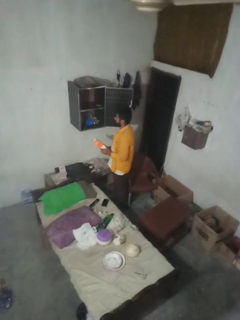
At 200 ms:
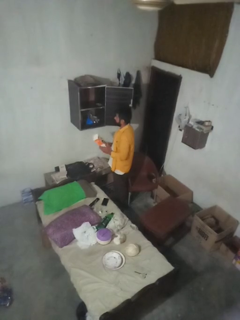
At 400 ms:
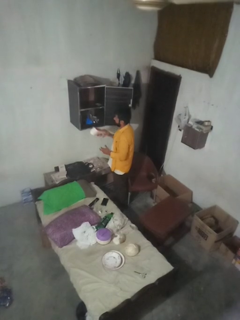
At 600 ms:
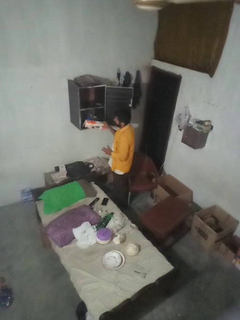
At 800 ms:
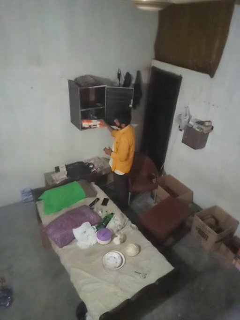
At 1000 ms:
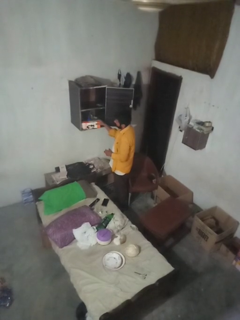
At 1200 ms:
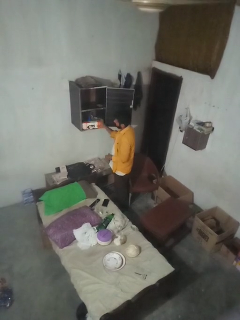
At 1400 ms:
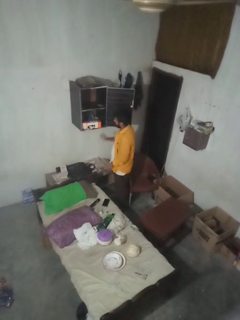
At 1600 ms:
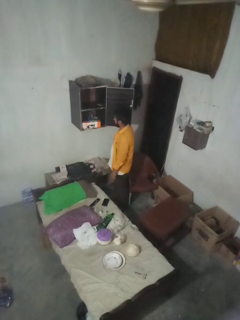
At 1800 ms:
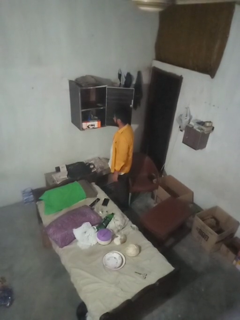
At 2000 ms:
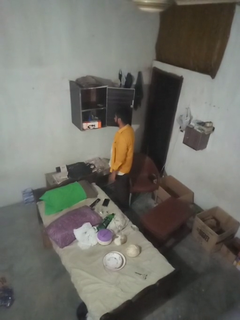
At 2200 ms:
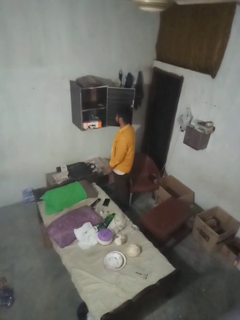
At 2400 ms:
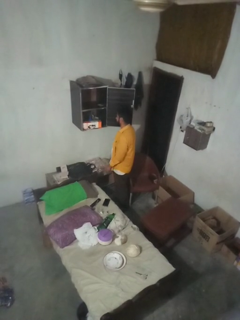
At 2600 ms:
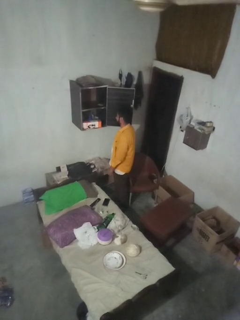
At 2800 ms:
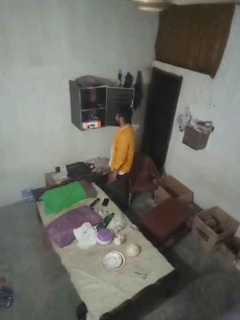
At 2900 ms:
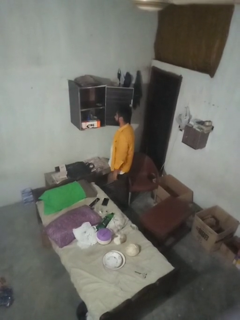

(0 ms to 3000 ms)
person puts down object into cabinet

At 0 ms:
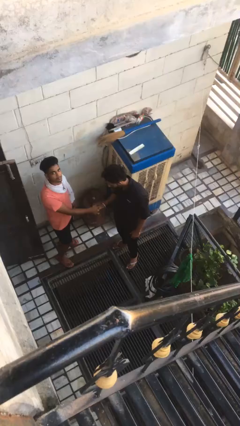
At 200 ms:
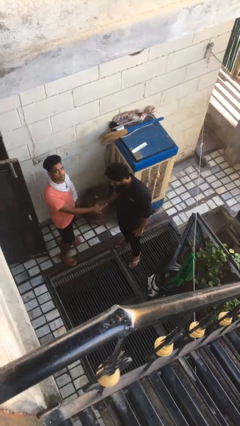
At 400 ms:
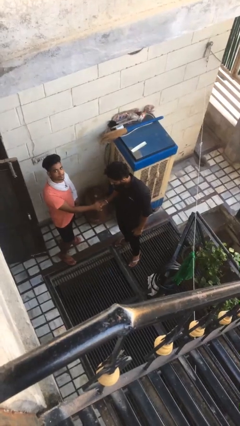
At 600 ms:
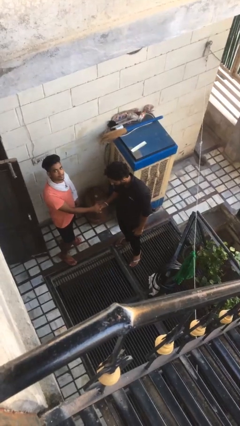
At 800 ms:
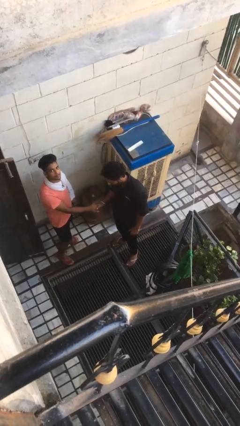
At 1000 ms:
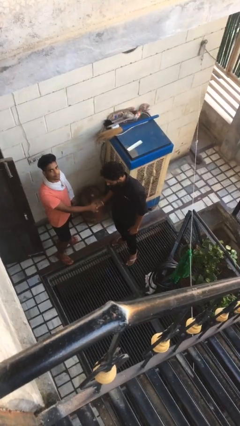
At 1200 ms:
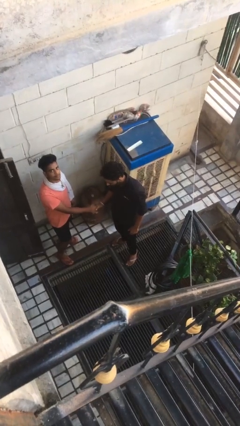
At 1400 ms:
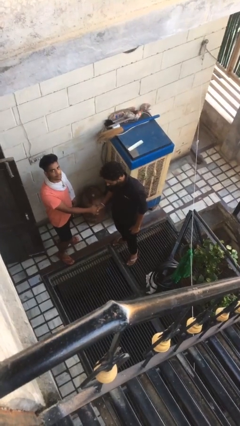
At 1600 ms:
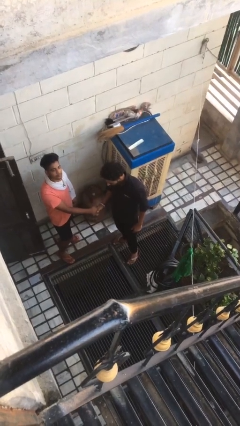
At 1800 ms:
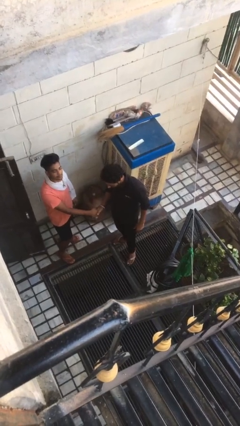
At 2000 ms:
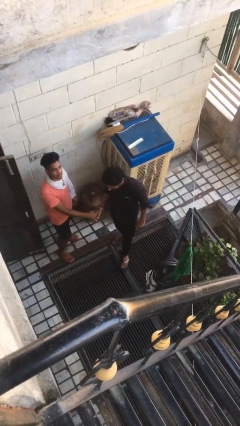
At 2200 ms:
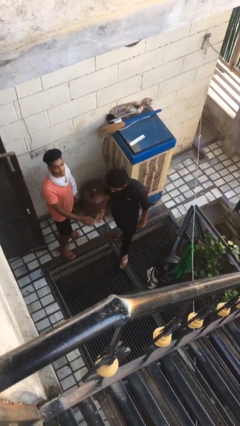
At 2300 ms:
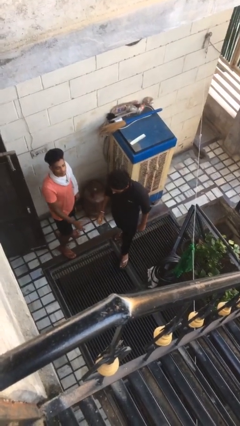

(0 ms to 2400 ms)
person shakes hand

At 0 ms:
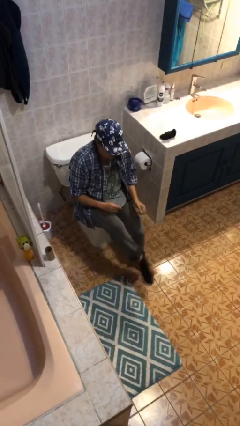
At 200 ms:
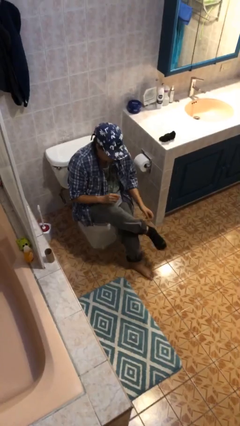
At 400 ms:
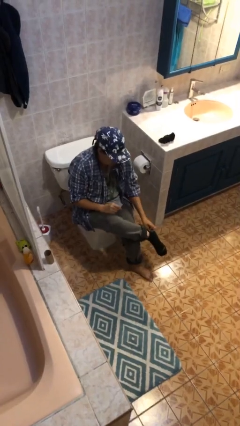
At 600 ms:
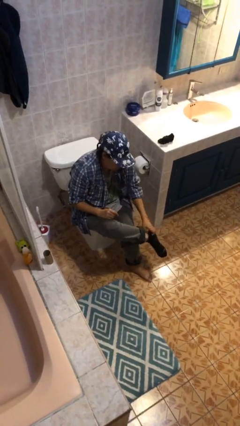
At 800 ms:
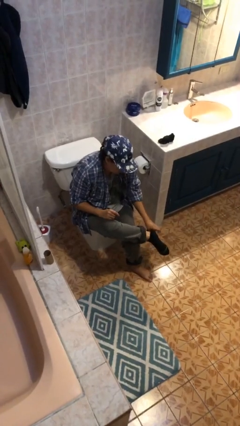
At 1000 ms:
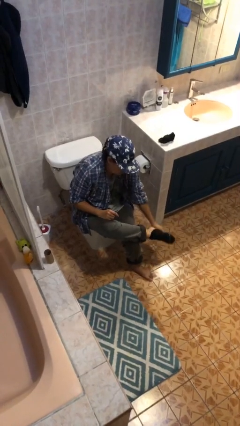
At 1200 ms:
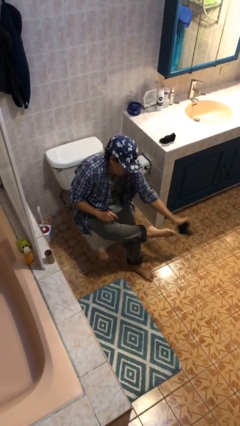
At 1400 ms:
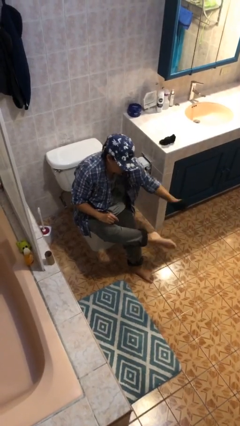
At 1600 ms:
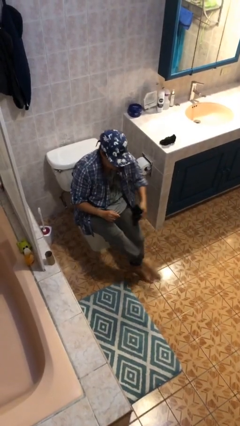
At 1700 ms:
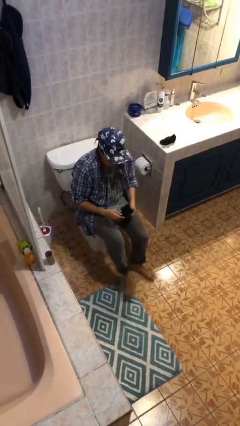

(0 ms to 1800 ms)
person takes off socks

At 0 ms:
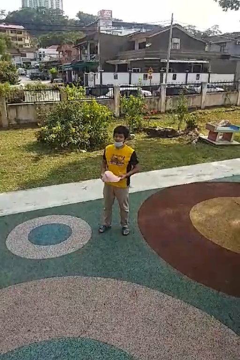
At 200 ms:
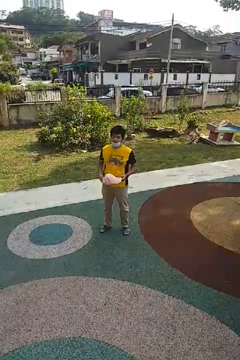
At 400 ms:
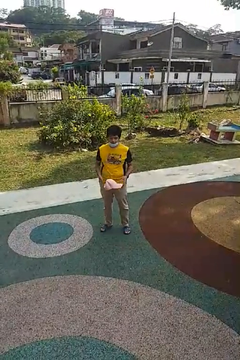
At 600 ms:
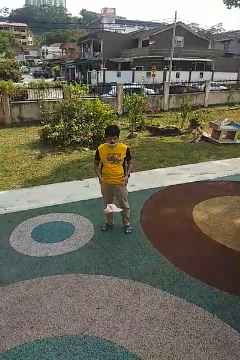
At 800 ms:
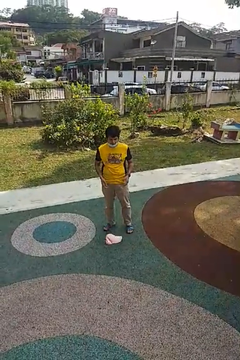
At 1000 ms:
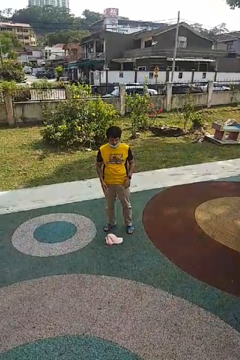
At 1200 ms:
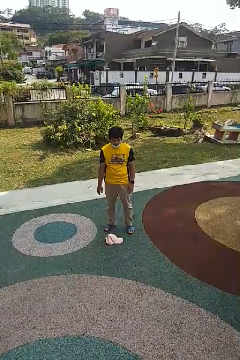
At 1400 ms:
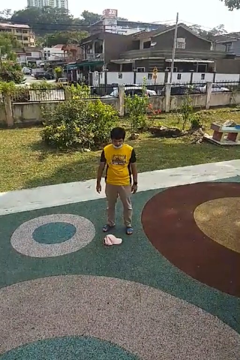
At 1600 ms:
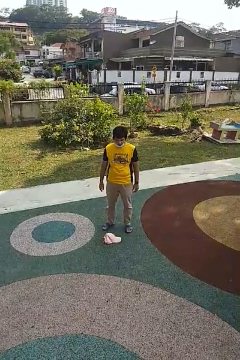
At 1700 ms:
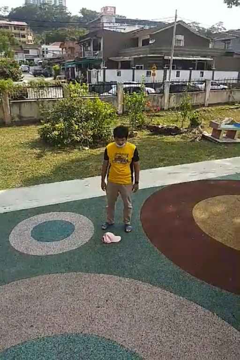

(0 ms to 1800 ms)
person drops object

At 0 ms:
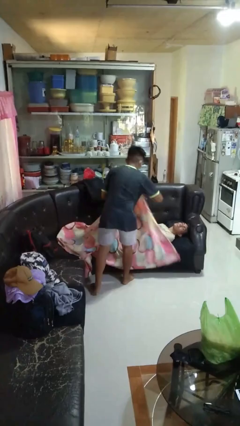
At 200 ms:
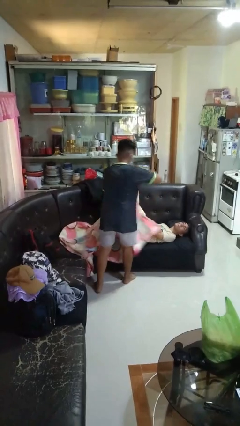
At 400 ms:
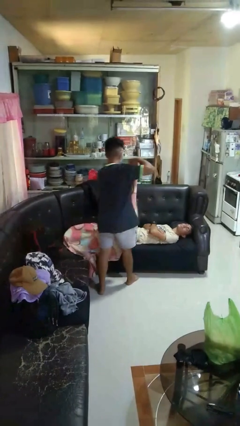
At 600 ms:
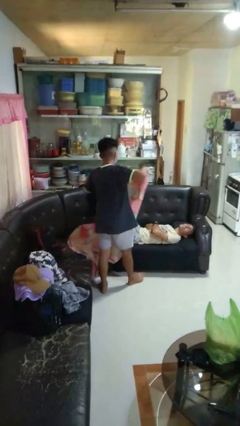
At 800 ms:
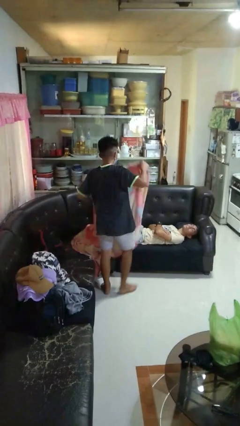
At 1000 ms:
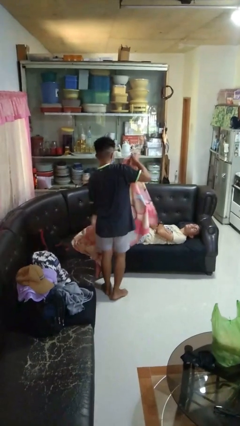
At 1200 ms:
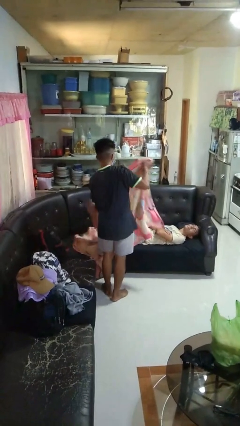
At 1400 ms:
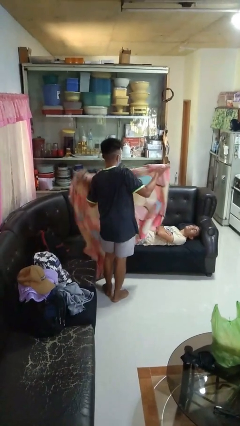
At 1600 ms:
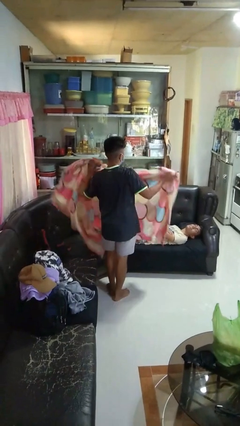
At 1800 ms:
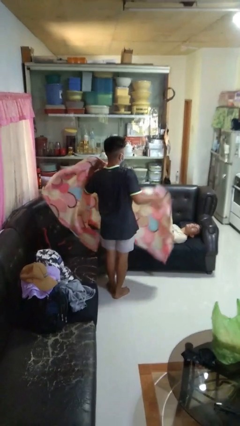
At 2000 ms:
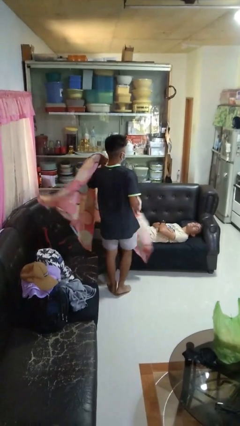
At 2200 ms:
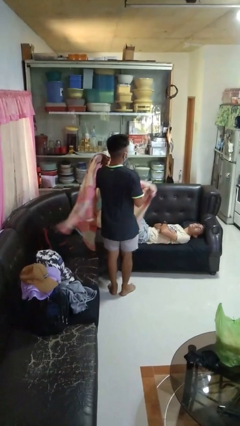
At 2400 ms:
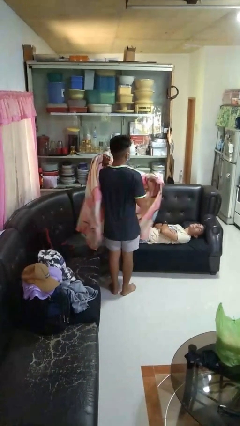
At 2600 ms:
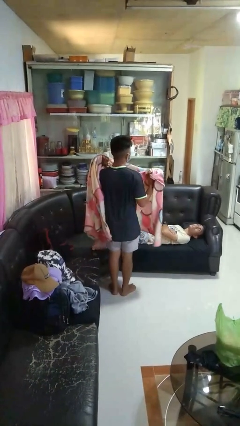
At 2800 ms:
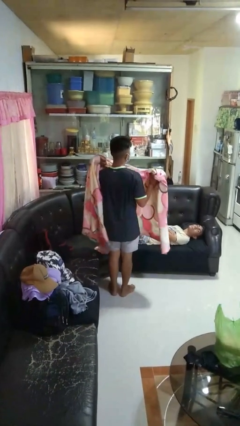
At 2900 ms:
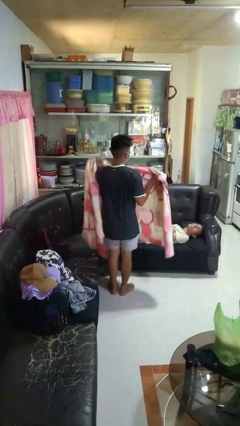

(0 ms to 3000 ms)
person uncovers friend with blanket

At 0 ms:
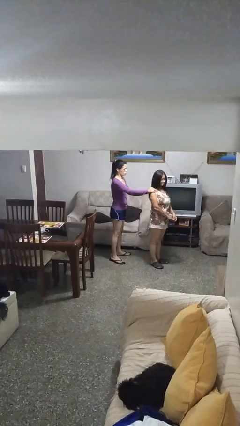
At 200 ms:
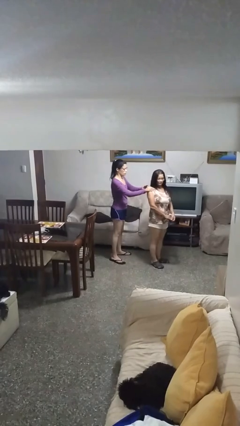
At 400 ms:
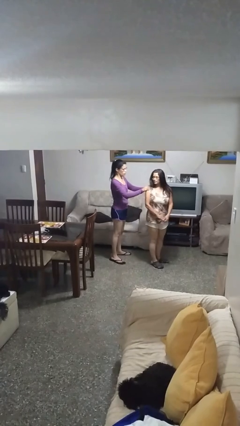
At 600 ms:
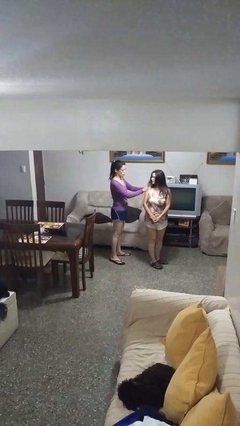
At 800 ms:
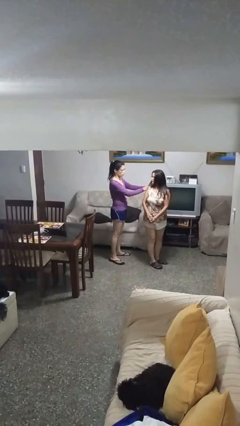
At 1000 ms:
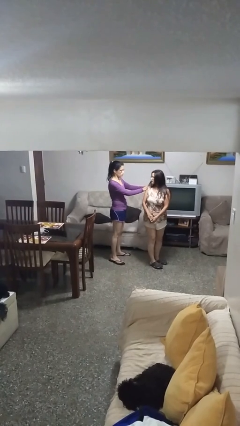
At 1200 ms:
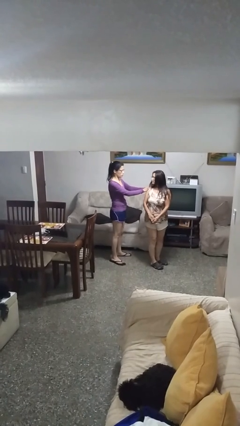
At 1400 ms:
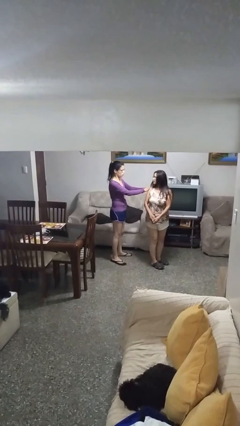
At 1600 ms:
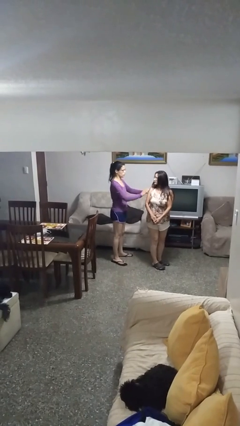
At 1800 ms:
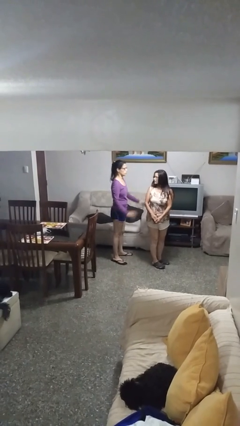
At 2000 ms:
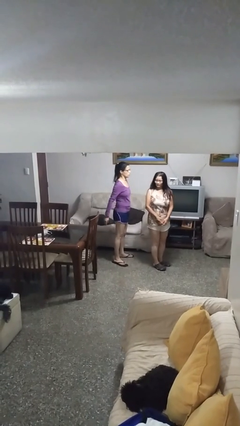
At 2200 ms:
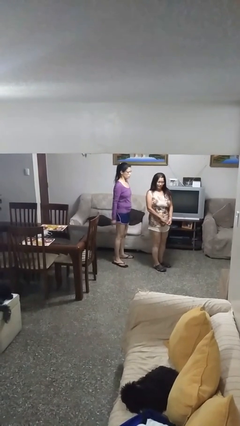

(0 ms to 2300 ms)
person spins person around

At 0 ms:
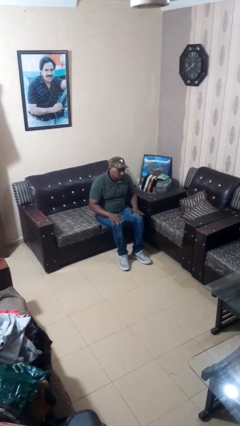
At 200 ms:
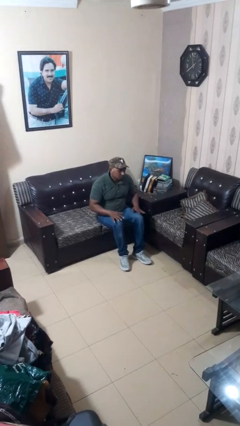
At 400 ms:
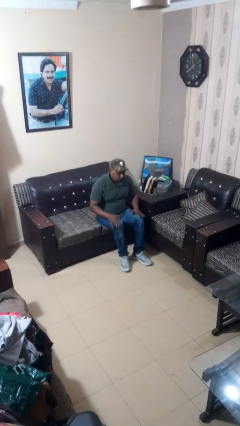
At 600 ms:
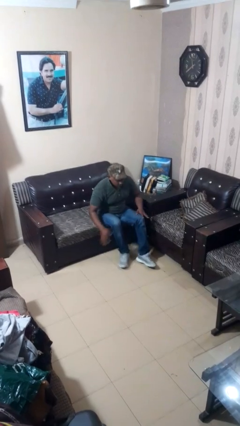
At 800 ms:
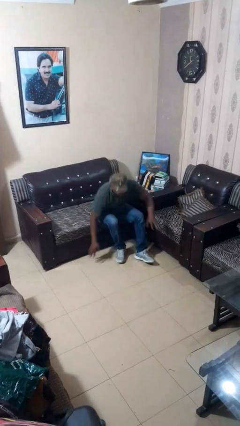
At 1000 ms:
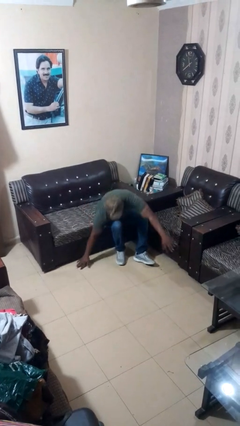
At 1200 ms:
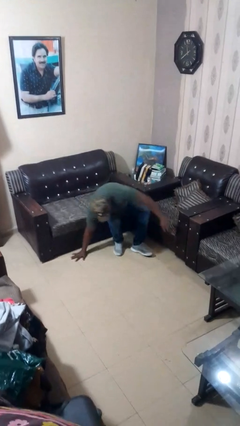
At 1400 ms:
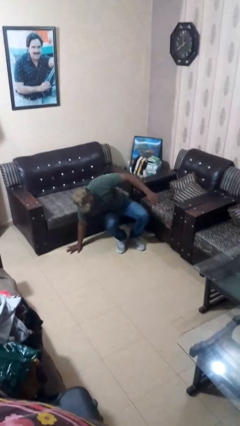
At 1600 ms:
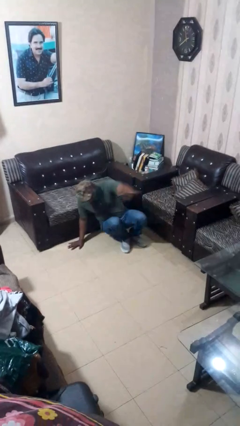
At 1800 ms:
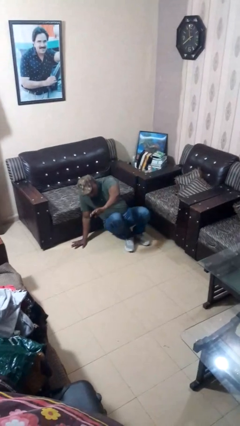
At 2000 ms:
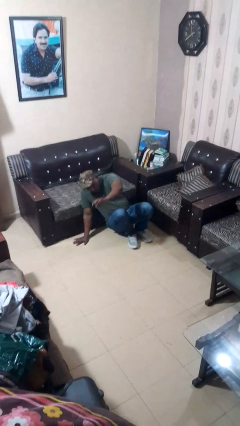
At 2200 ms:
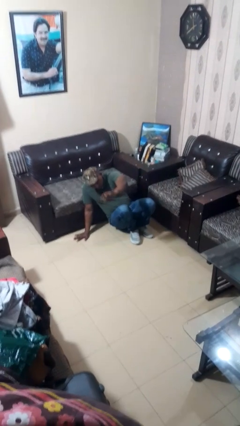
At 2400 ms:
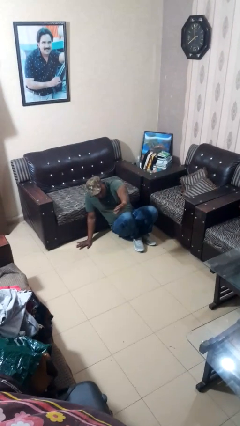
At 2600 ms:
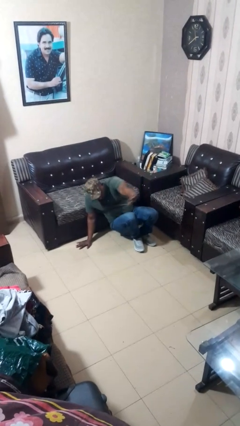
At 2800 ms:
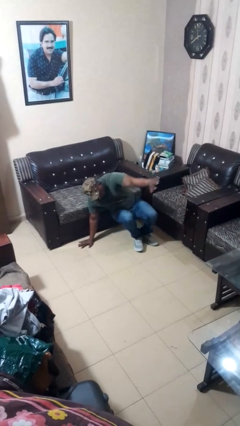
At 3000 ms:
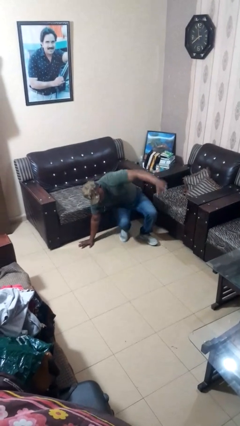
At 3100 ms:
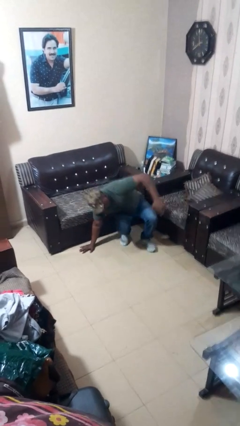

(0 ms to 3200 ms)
person falls from chair

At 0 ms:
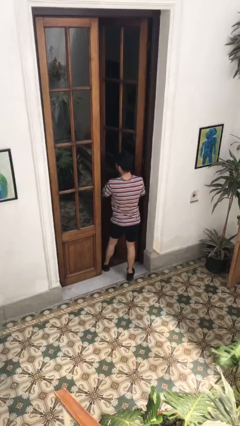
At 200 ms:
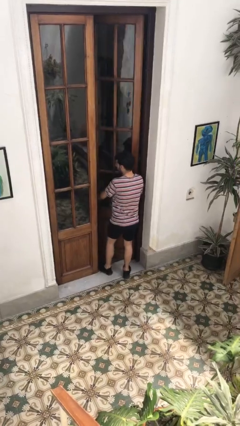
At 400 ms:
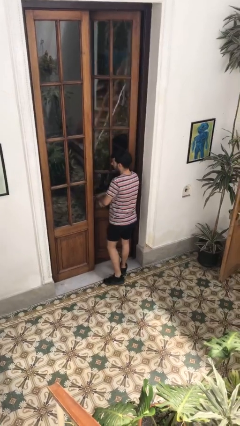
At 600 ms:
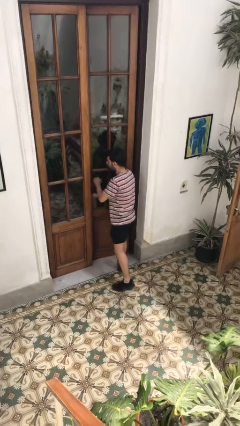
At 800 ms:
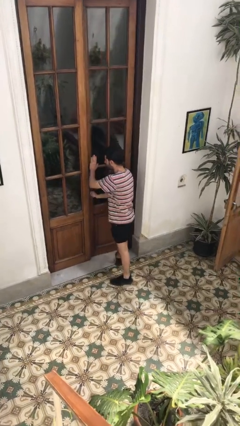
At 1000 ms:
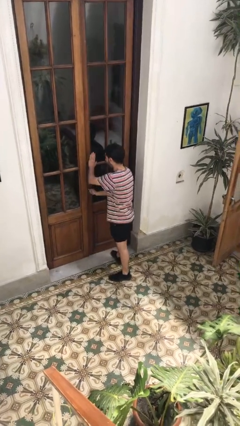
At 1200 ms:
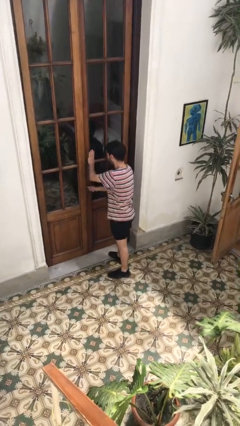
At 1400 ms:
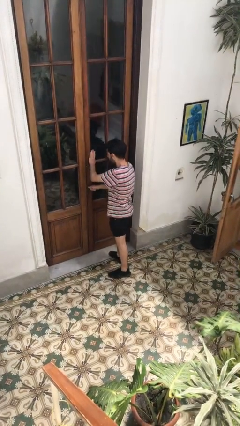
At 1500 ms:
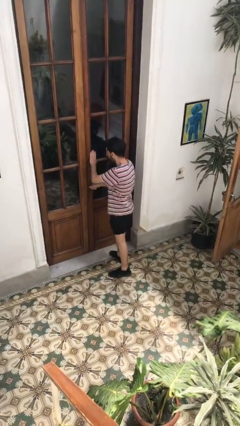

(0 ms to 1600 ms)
person closes facility door
